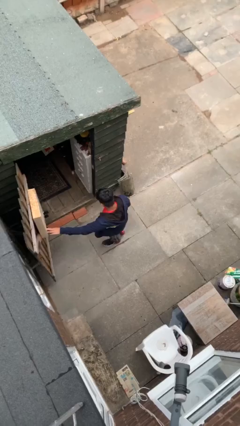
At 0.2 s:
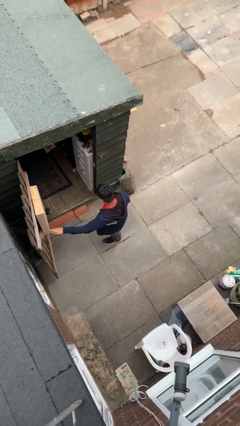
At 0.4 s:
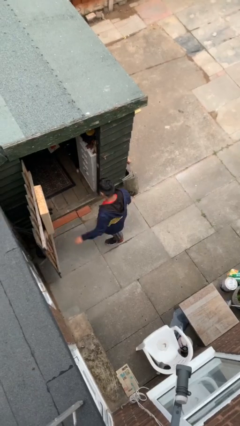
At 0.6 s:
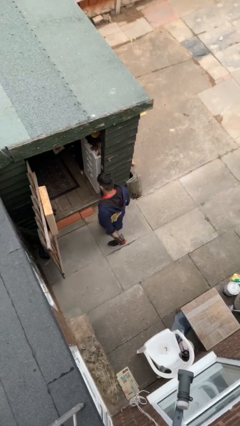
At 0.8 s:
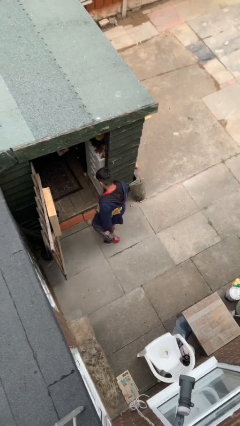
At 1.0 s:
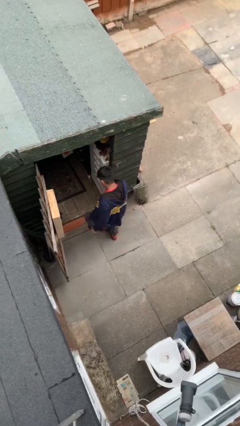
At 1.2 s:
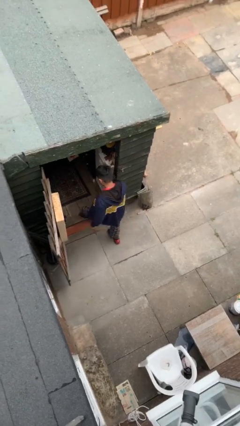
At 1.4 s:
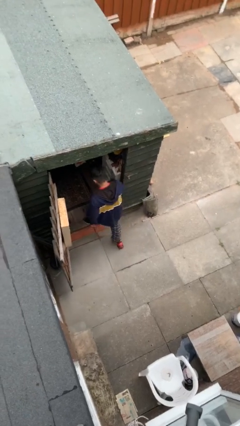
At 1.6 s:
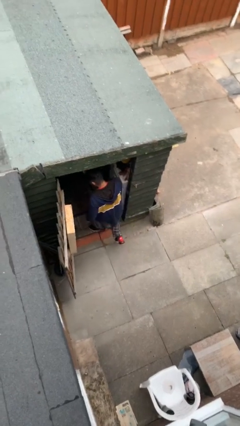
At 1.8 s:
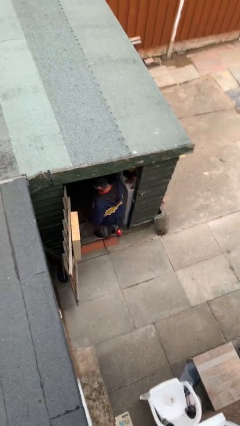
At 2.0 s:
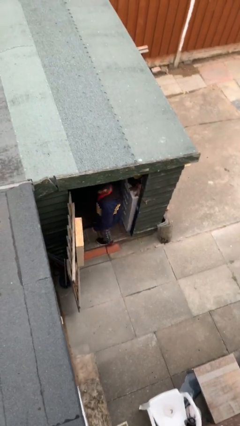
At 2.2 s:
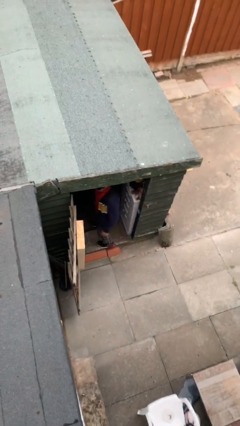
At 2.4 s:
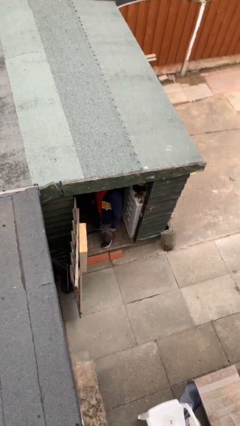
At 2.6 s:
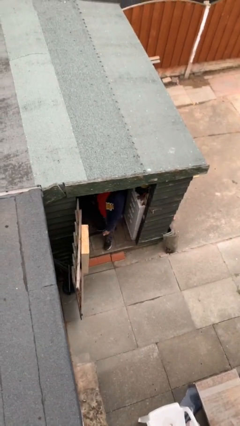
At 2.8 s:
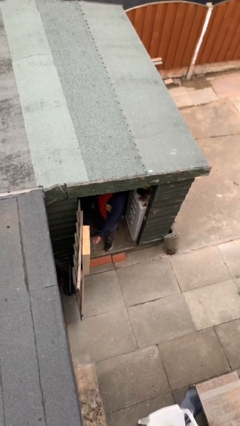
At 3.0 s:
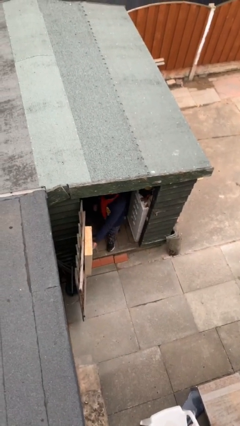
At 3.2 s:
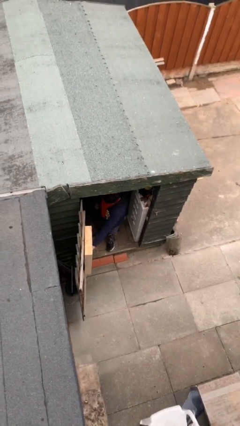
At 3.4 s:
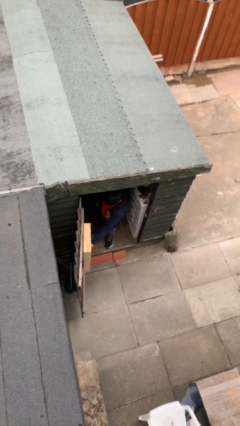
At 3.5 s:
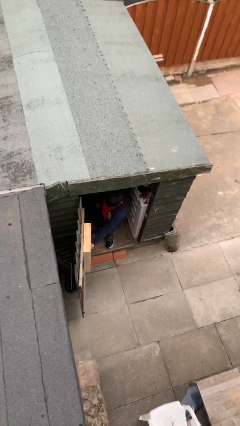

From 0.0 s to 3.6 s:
person exits scene through structure

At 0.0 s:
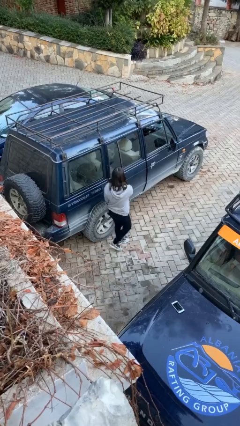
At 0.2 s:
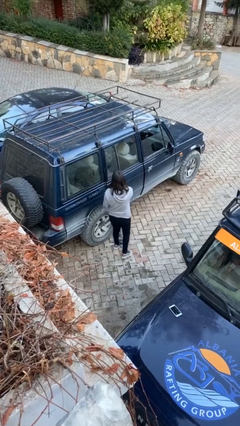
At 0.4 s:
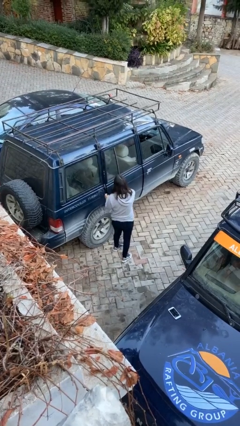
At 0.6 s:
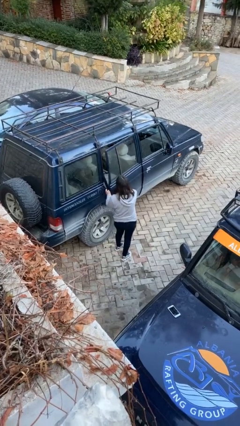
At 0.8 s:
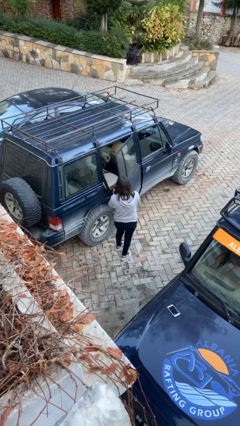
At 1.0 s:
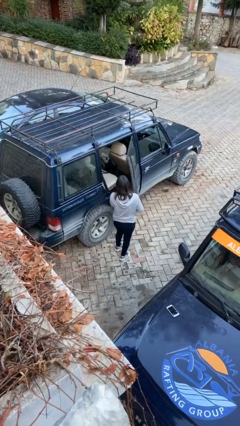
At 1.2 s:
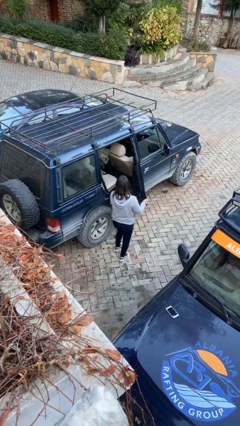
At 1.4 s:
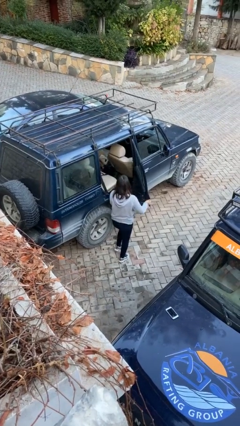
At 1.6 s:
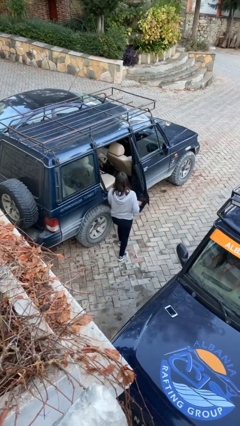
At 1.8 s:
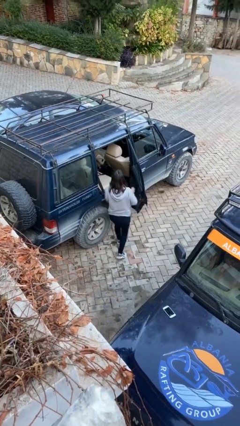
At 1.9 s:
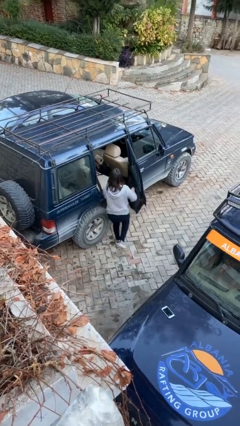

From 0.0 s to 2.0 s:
person opens car door

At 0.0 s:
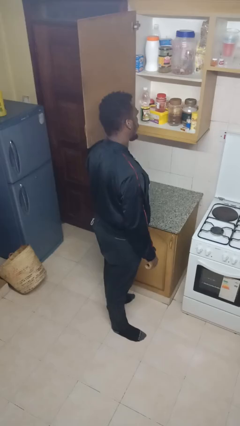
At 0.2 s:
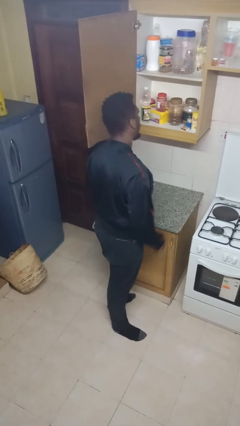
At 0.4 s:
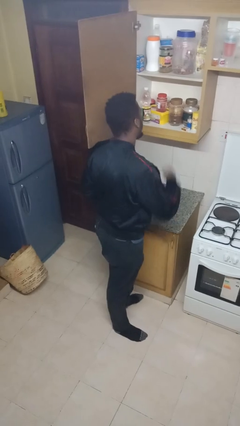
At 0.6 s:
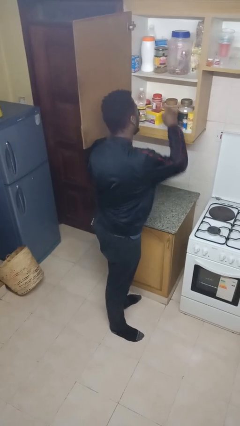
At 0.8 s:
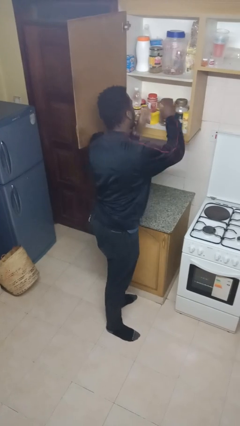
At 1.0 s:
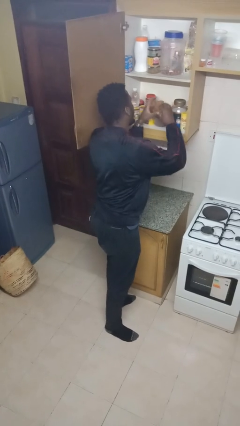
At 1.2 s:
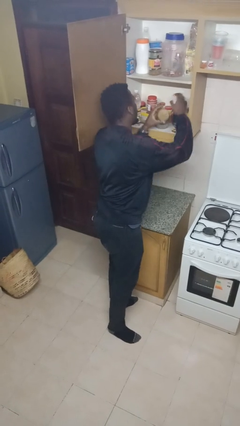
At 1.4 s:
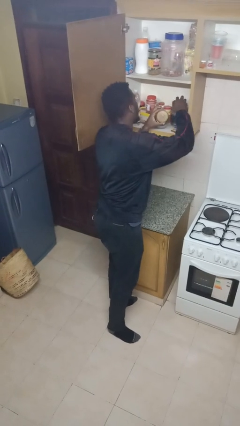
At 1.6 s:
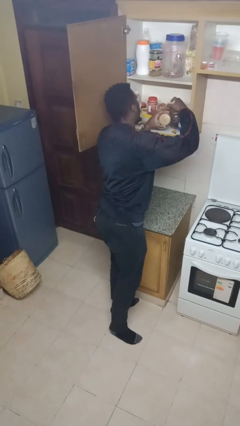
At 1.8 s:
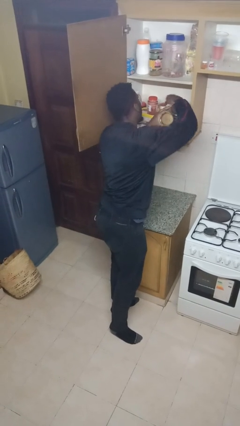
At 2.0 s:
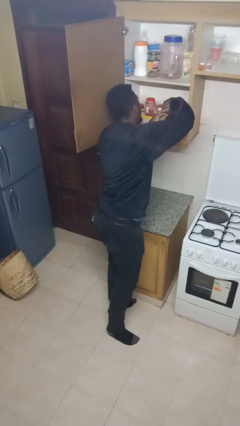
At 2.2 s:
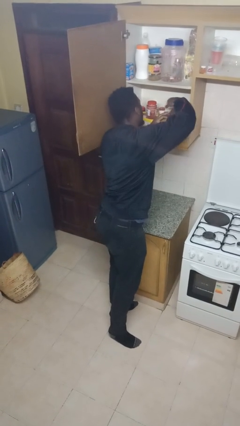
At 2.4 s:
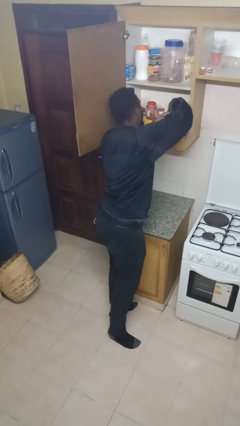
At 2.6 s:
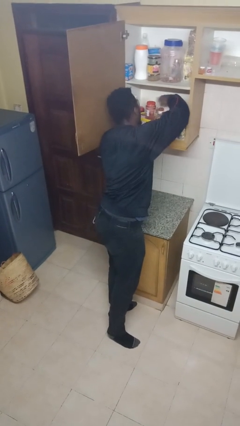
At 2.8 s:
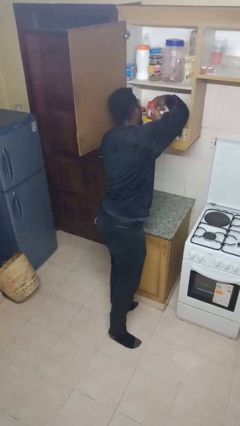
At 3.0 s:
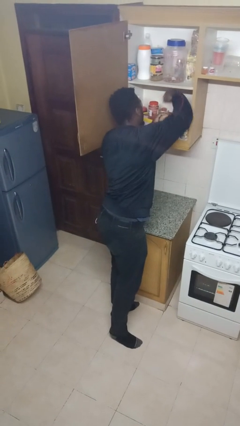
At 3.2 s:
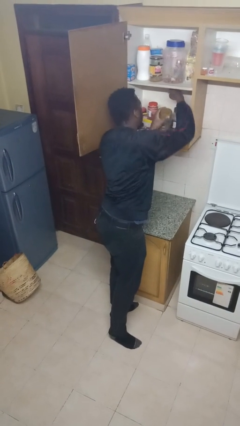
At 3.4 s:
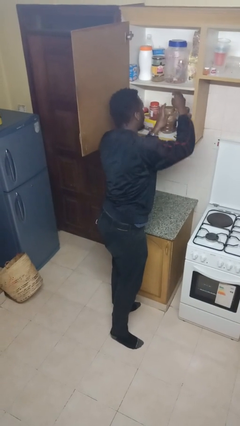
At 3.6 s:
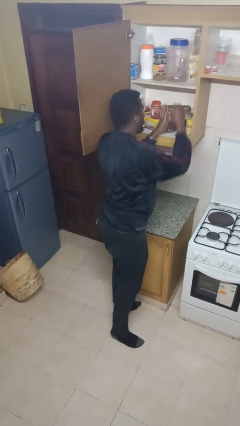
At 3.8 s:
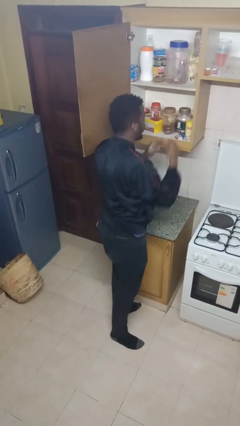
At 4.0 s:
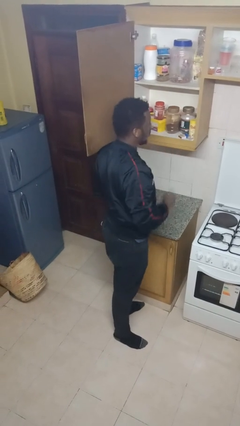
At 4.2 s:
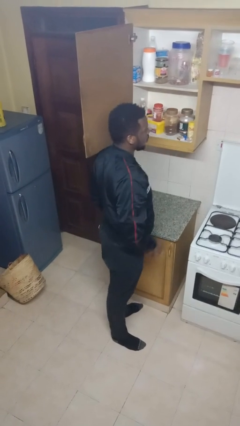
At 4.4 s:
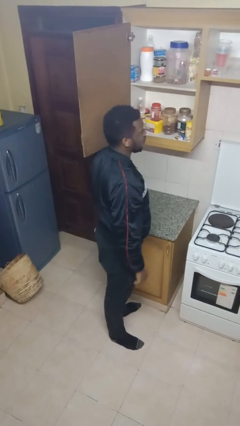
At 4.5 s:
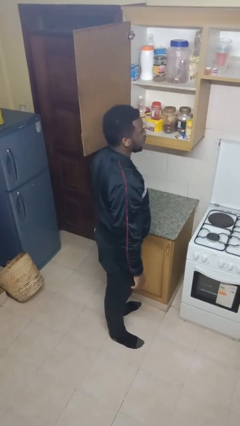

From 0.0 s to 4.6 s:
person searches in cabinet

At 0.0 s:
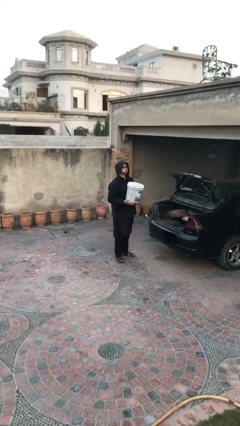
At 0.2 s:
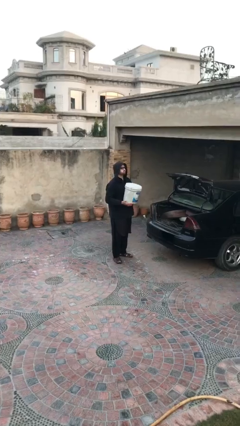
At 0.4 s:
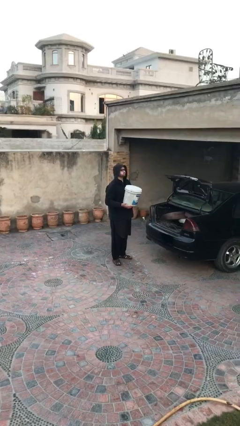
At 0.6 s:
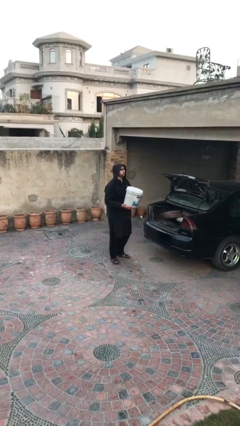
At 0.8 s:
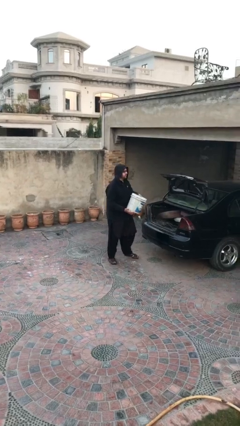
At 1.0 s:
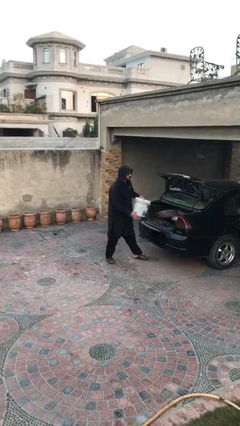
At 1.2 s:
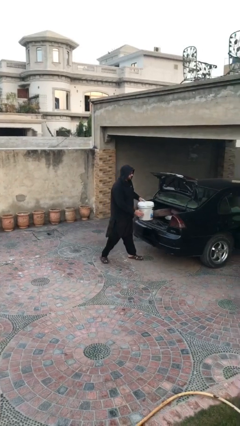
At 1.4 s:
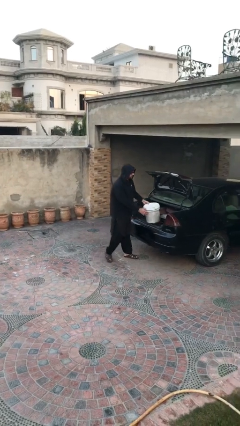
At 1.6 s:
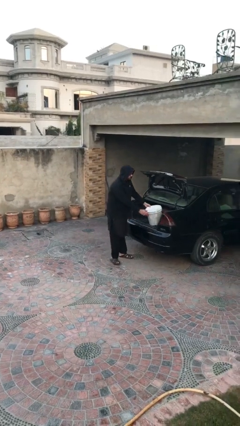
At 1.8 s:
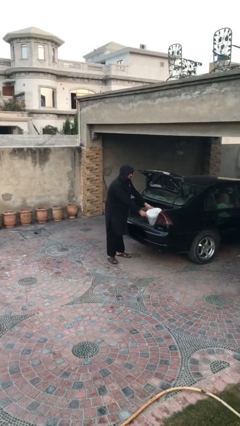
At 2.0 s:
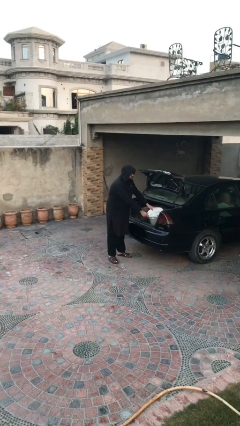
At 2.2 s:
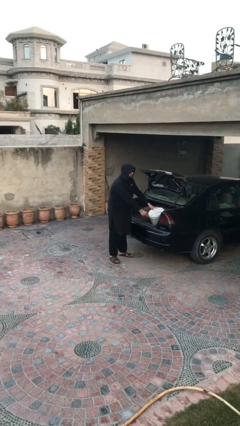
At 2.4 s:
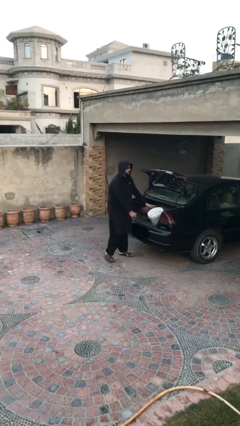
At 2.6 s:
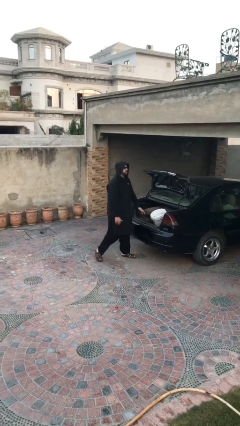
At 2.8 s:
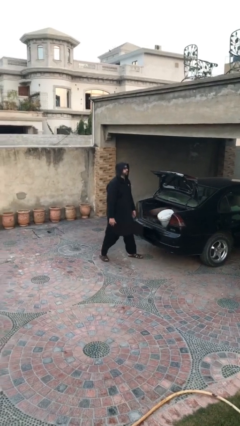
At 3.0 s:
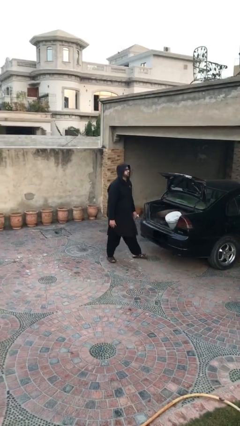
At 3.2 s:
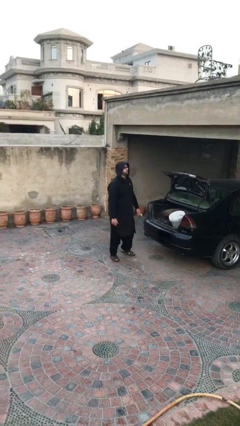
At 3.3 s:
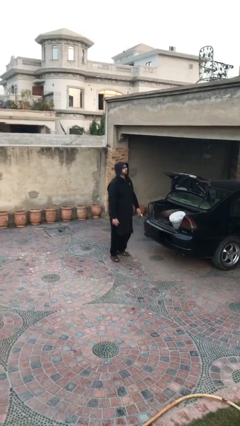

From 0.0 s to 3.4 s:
person loads car

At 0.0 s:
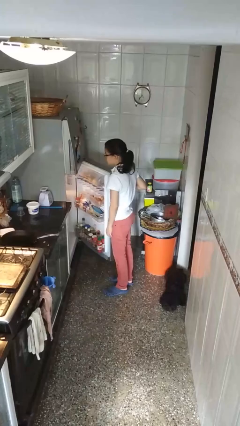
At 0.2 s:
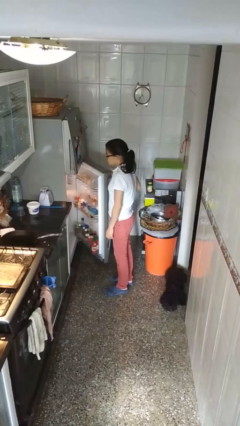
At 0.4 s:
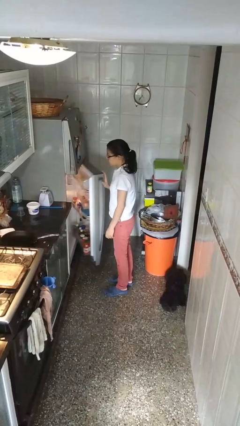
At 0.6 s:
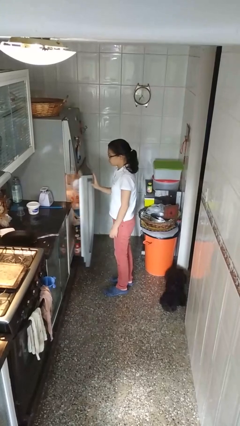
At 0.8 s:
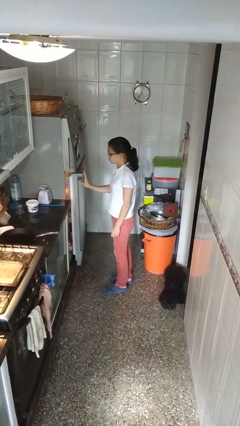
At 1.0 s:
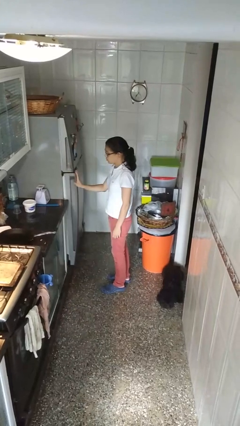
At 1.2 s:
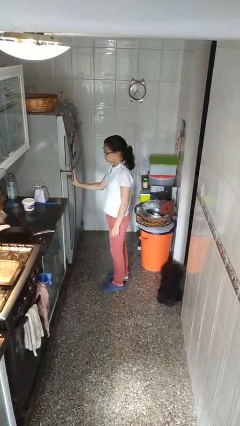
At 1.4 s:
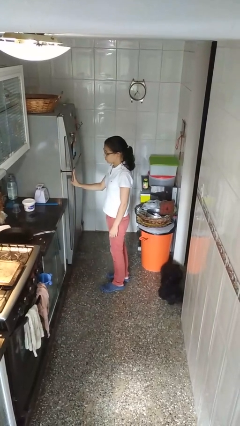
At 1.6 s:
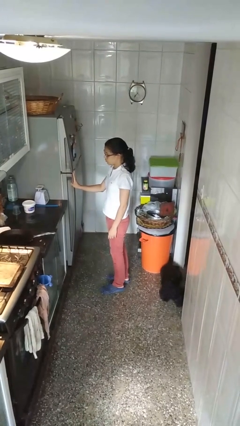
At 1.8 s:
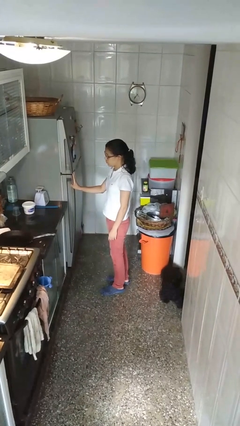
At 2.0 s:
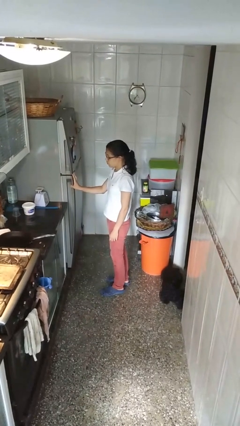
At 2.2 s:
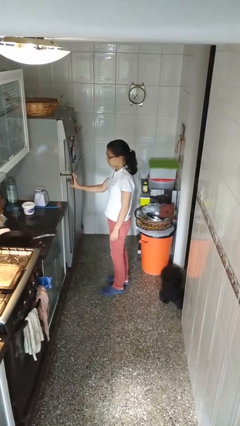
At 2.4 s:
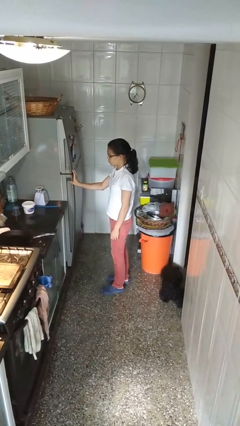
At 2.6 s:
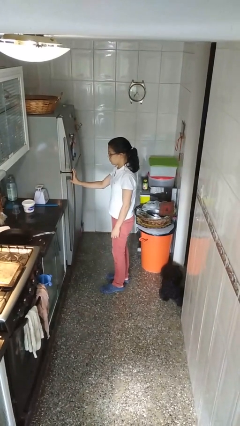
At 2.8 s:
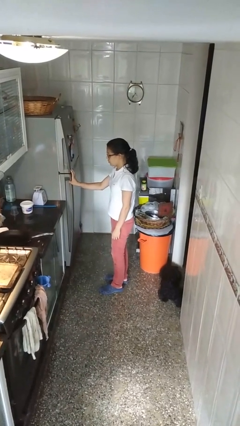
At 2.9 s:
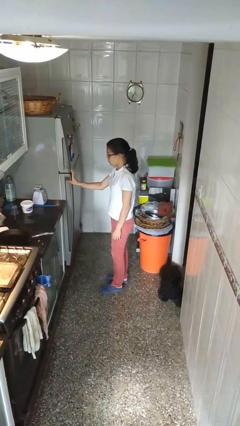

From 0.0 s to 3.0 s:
person closes refrigerator

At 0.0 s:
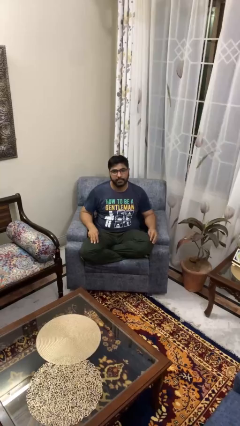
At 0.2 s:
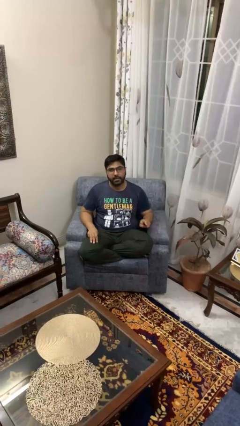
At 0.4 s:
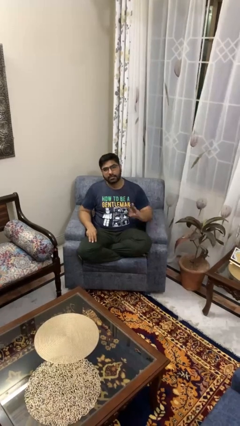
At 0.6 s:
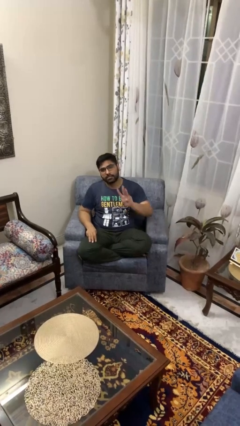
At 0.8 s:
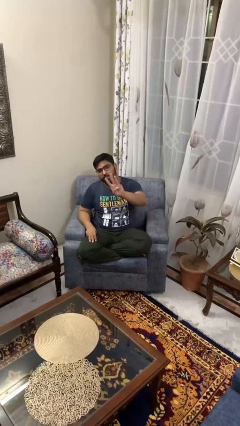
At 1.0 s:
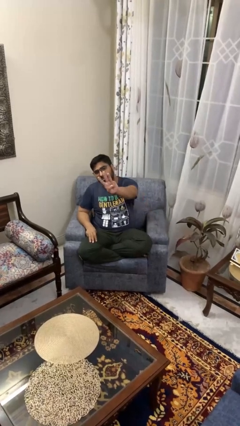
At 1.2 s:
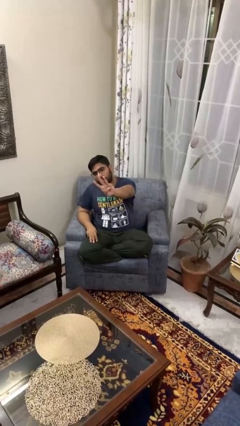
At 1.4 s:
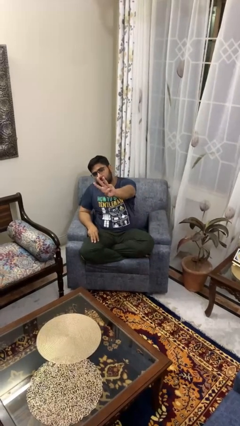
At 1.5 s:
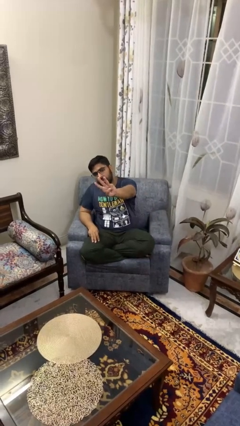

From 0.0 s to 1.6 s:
person gestures number three
